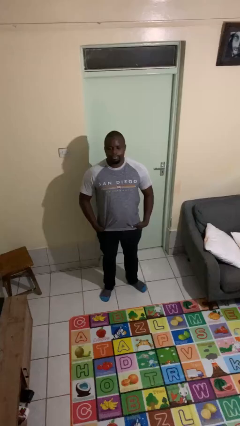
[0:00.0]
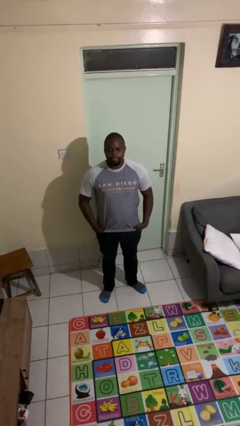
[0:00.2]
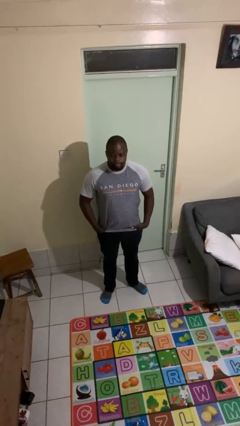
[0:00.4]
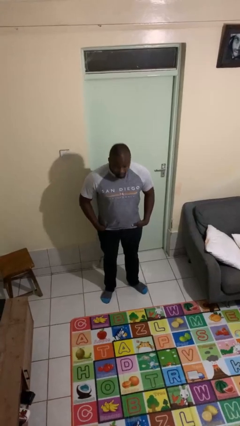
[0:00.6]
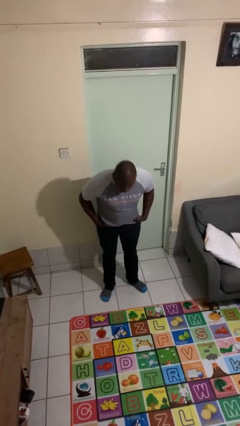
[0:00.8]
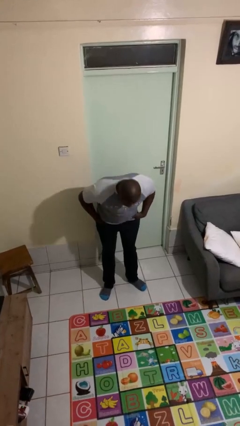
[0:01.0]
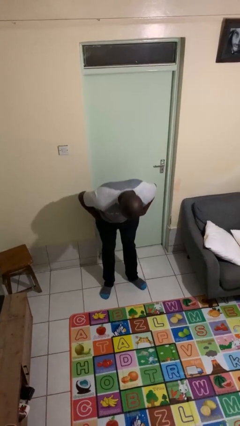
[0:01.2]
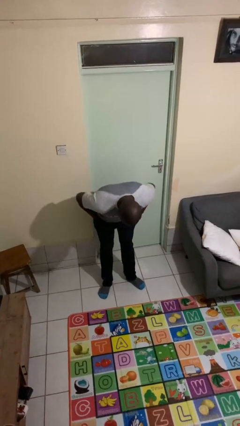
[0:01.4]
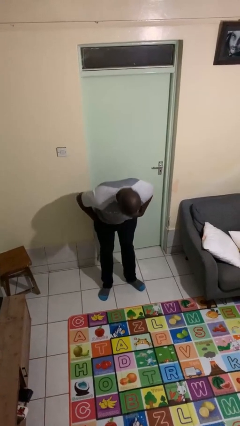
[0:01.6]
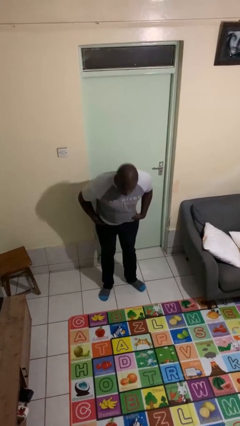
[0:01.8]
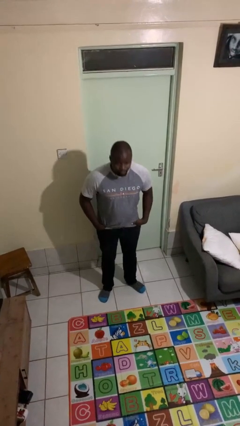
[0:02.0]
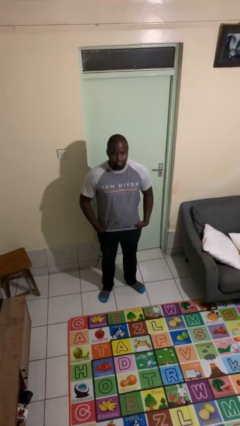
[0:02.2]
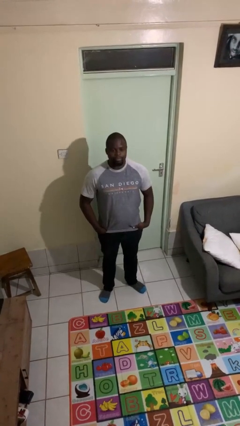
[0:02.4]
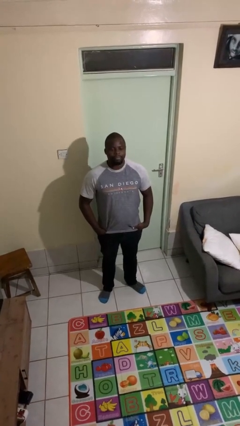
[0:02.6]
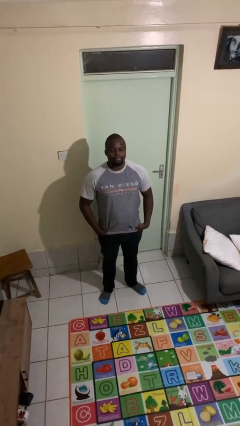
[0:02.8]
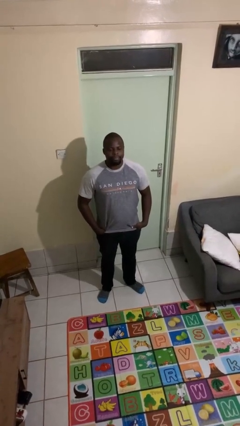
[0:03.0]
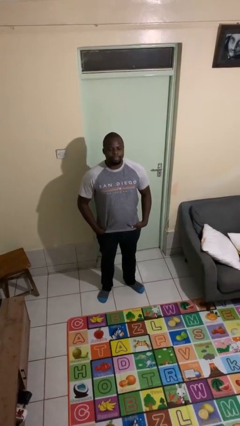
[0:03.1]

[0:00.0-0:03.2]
person bows

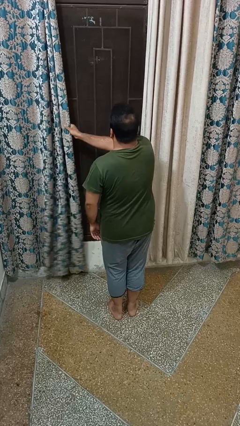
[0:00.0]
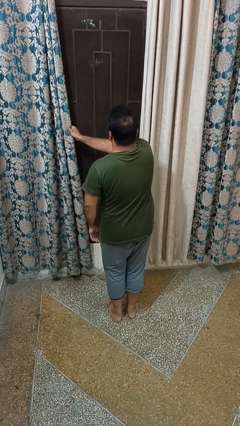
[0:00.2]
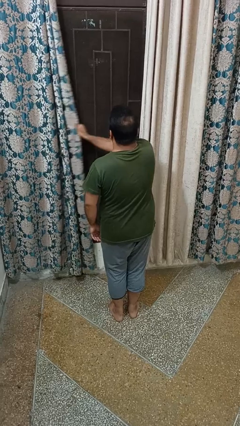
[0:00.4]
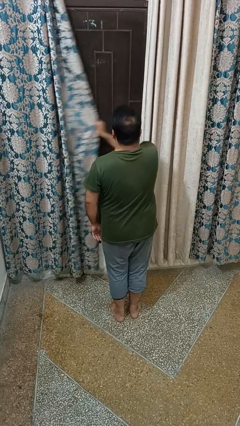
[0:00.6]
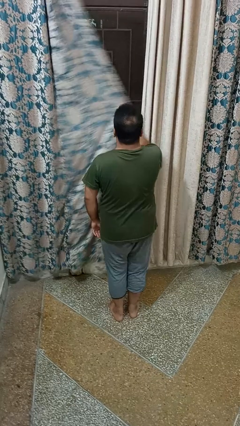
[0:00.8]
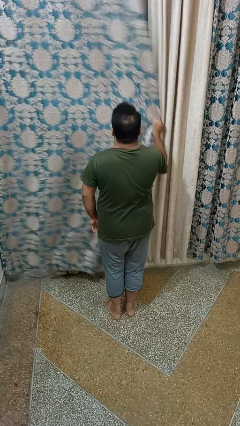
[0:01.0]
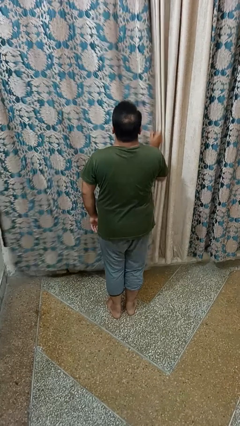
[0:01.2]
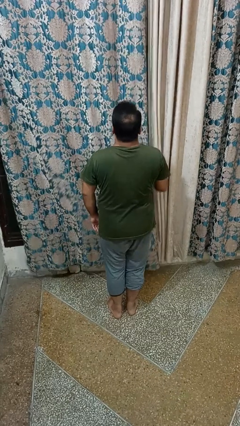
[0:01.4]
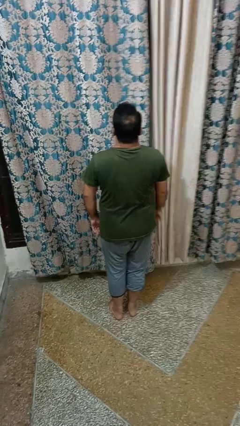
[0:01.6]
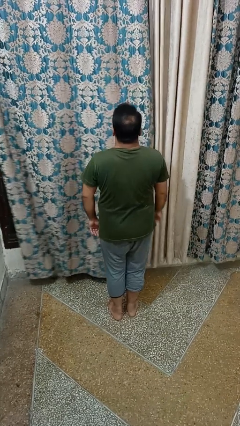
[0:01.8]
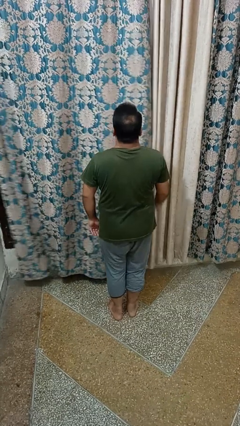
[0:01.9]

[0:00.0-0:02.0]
person closes curtains

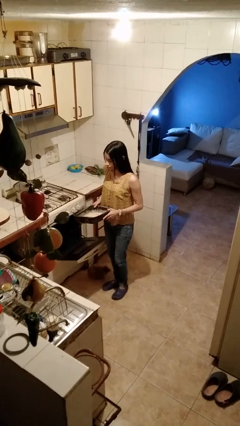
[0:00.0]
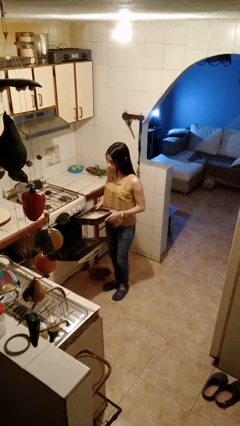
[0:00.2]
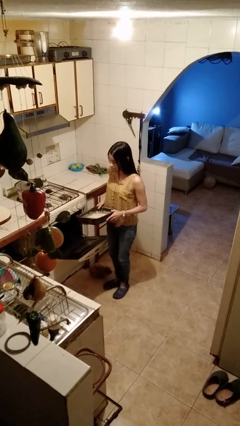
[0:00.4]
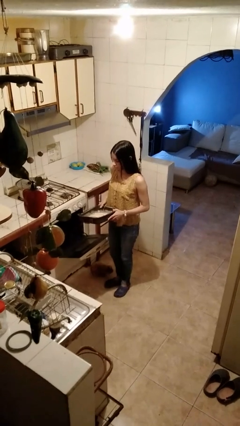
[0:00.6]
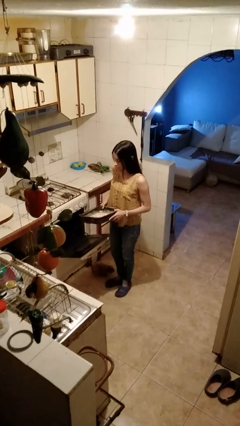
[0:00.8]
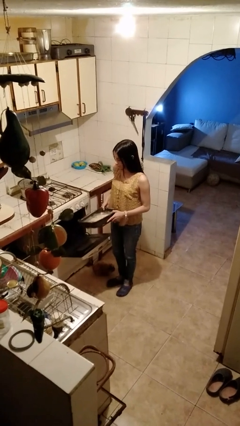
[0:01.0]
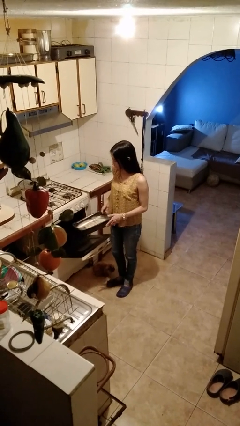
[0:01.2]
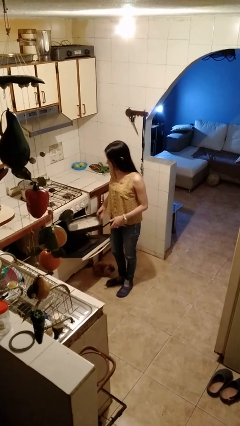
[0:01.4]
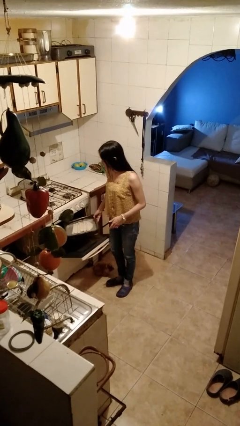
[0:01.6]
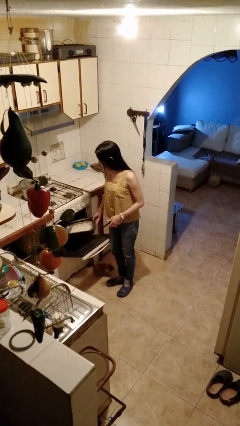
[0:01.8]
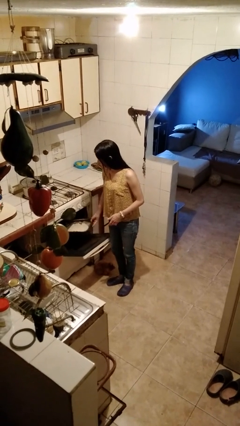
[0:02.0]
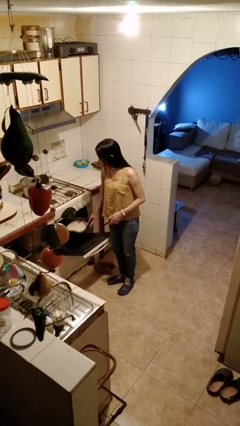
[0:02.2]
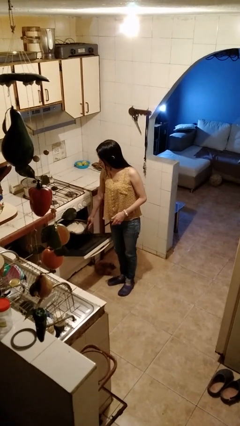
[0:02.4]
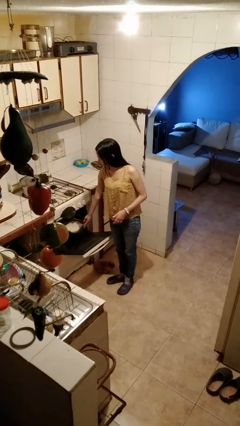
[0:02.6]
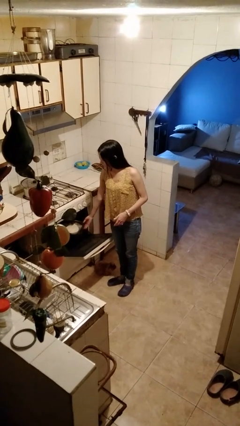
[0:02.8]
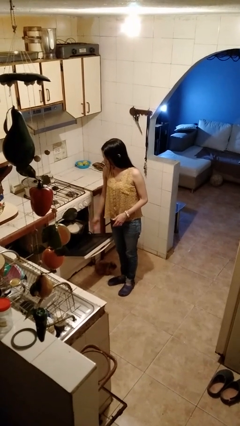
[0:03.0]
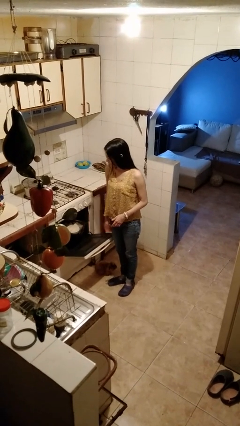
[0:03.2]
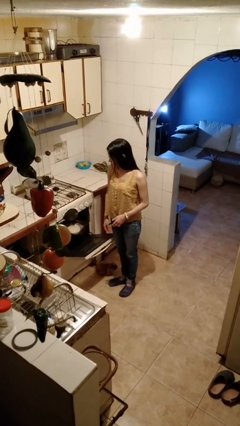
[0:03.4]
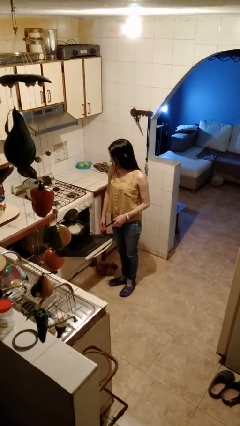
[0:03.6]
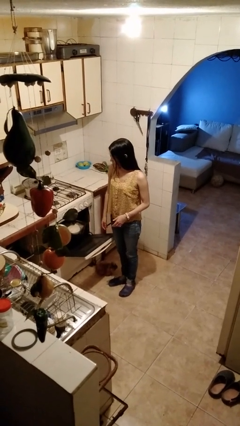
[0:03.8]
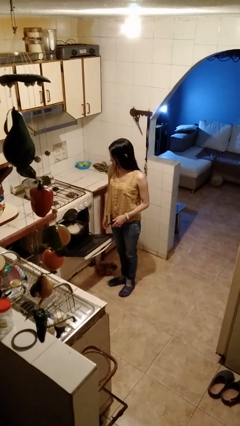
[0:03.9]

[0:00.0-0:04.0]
person puts object into oven

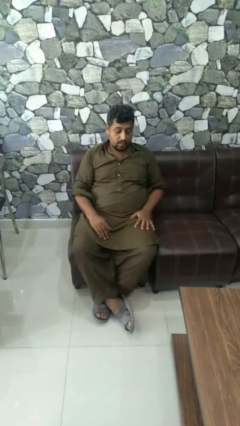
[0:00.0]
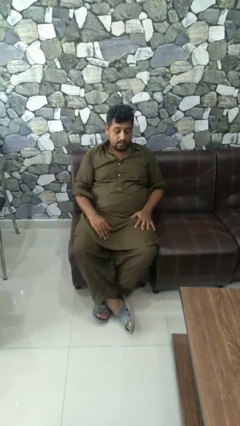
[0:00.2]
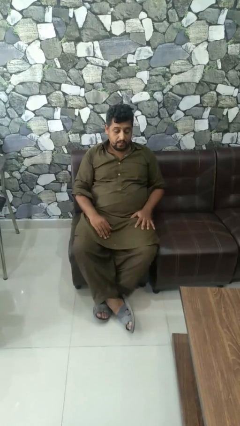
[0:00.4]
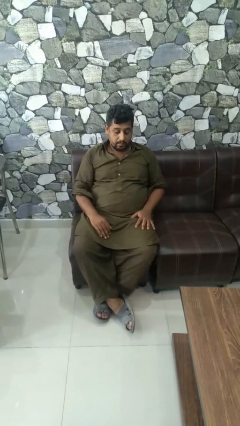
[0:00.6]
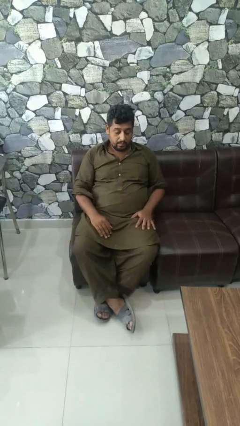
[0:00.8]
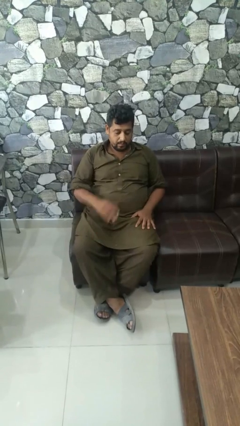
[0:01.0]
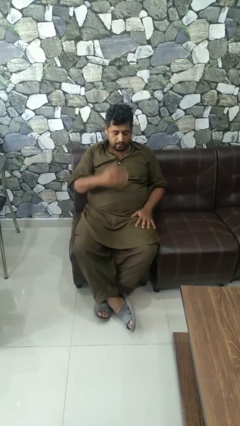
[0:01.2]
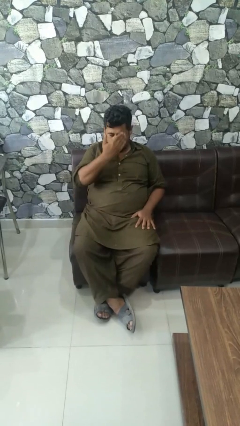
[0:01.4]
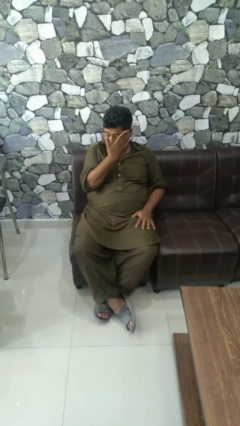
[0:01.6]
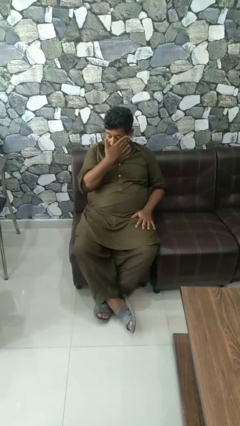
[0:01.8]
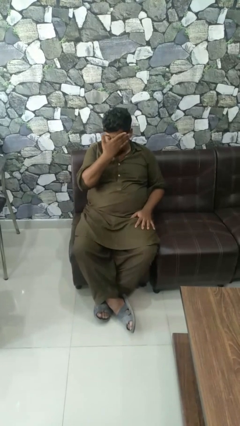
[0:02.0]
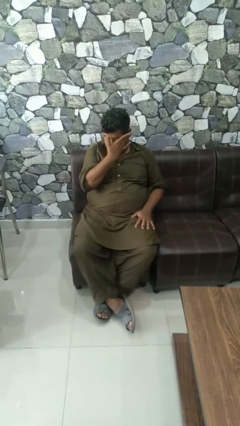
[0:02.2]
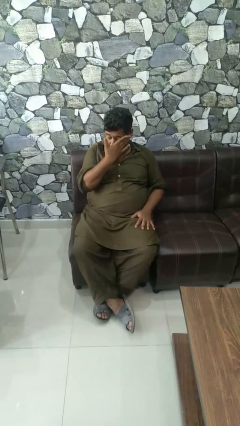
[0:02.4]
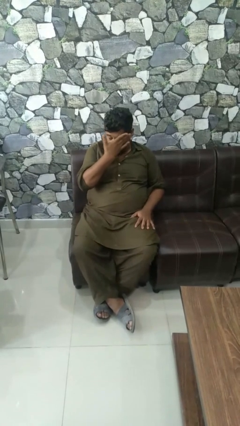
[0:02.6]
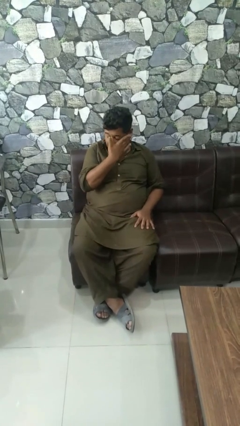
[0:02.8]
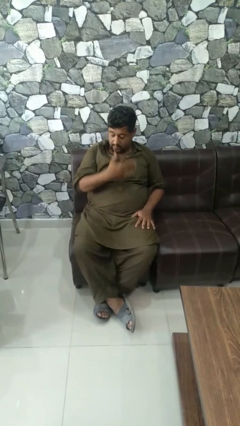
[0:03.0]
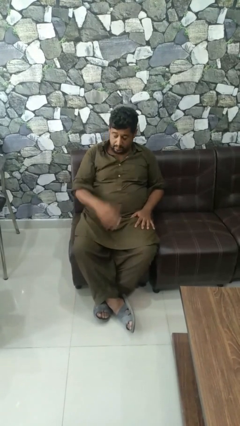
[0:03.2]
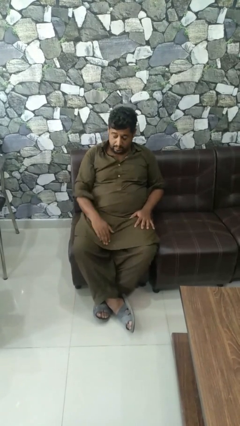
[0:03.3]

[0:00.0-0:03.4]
person rubs eyes

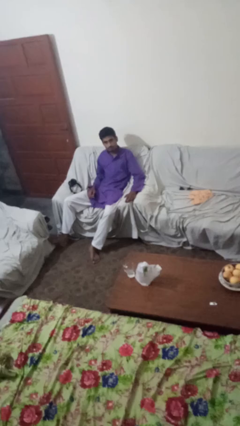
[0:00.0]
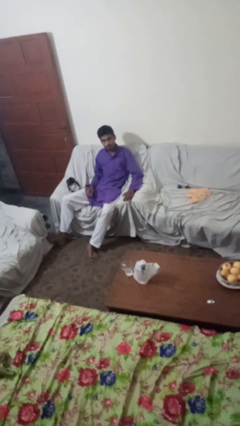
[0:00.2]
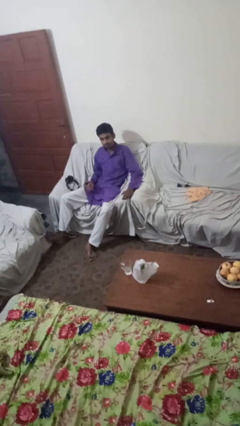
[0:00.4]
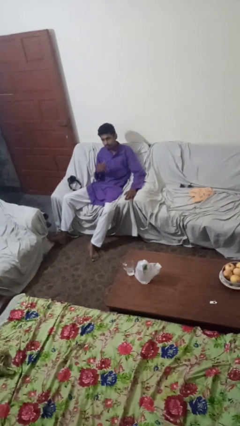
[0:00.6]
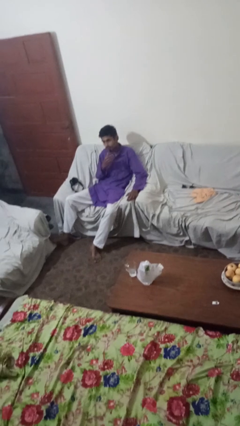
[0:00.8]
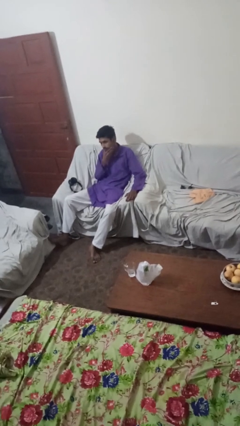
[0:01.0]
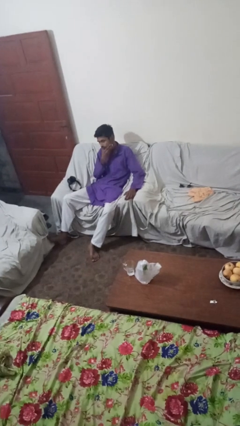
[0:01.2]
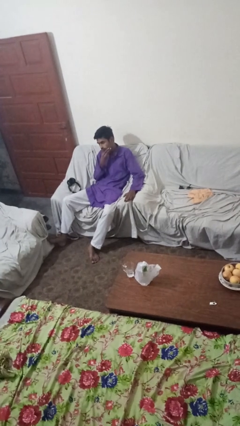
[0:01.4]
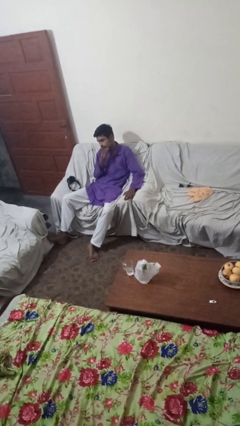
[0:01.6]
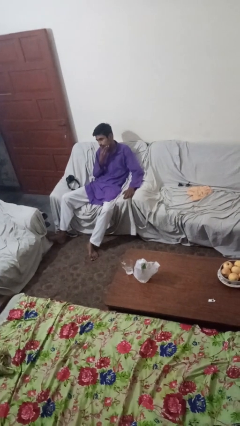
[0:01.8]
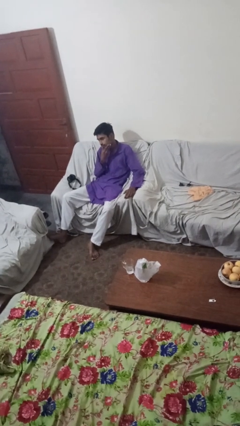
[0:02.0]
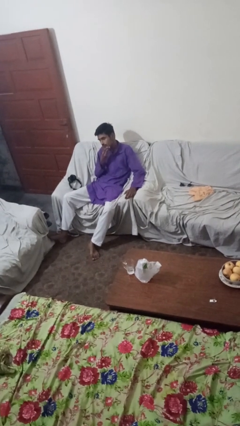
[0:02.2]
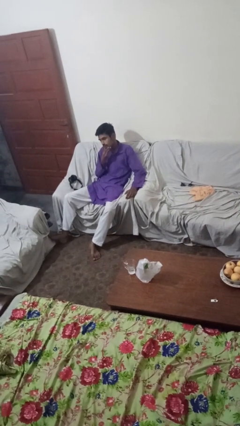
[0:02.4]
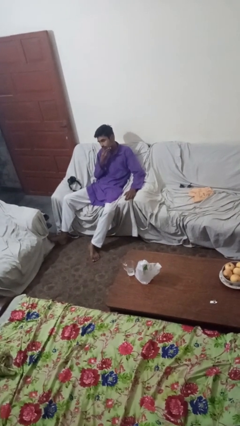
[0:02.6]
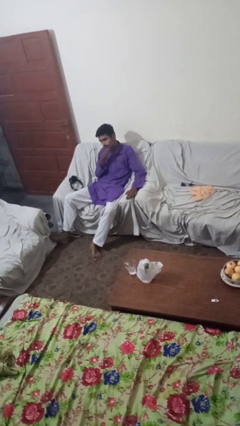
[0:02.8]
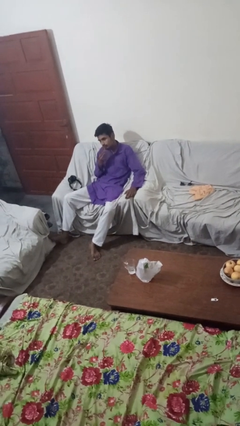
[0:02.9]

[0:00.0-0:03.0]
person strokes chin

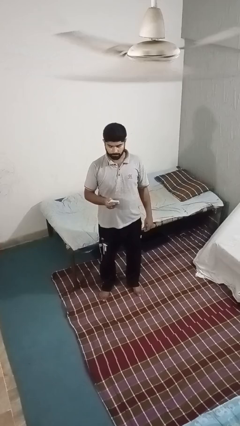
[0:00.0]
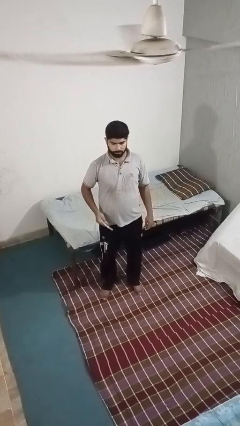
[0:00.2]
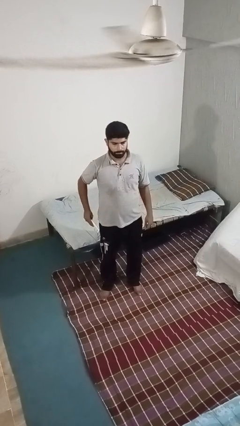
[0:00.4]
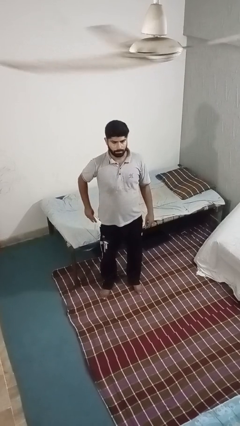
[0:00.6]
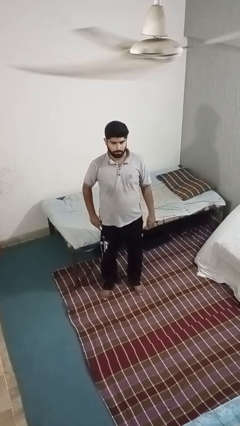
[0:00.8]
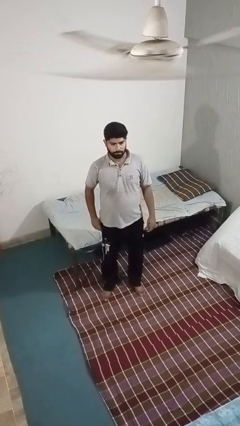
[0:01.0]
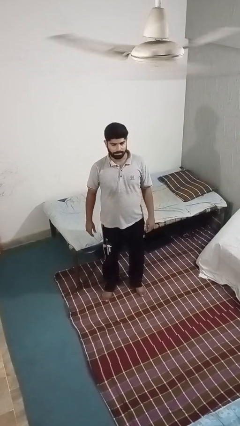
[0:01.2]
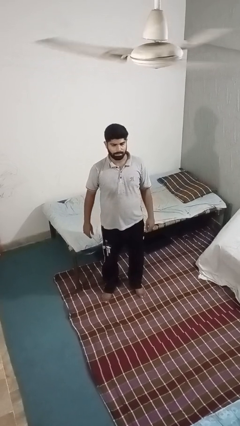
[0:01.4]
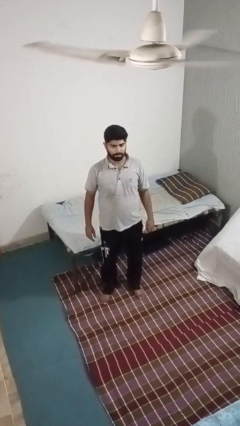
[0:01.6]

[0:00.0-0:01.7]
person puts phone into pocket

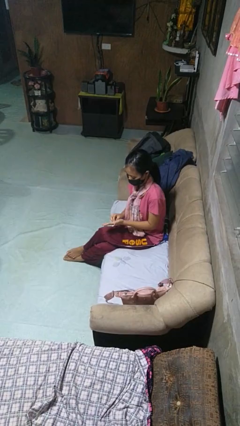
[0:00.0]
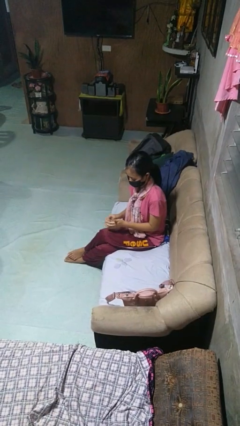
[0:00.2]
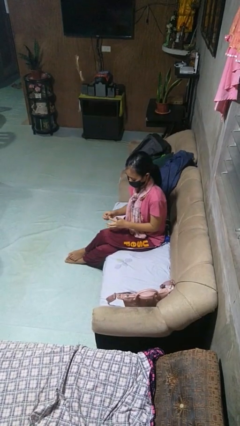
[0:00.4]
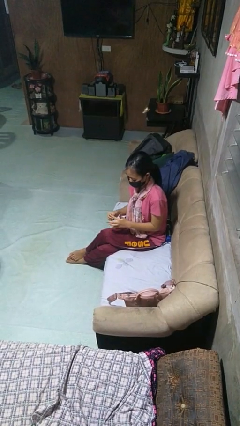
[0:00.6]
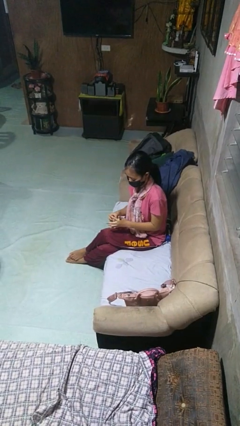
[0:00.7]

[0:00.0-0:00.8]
person puts on ring
